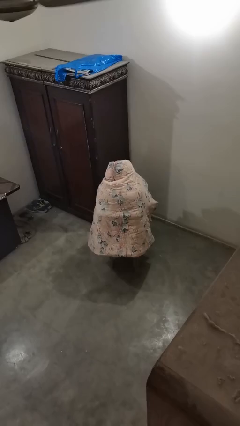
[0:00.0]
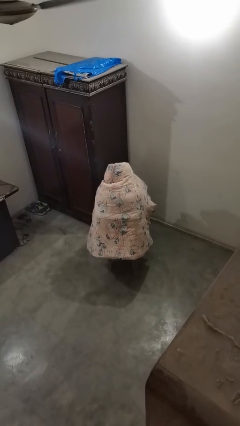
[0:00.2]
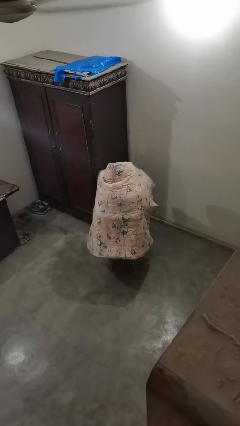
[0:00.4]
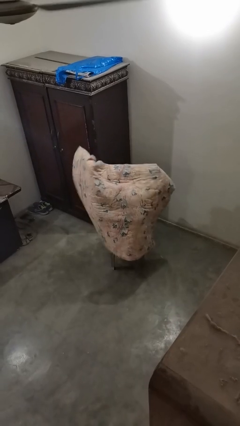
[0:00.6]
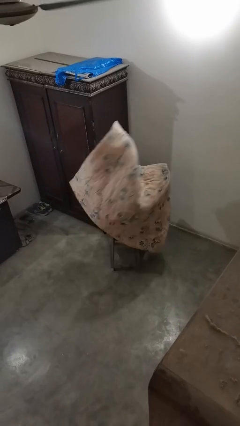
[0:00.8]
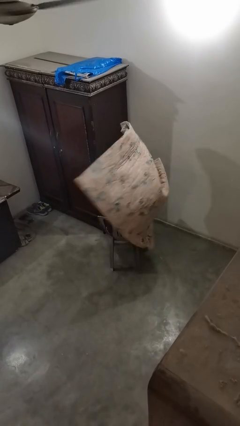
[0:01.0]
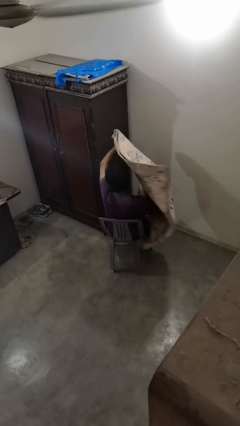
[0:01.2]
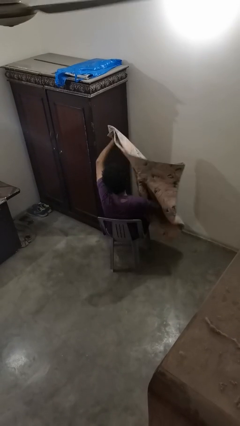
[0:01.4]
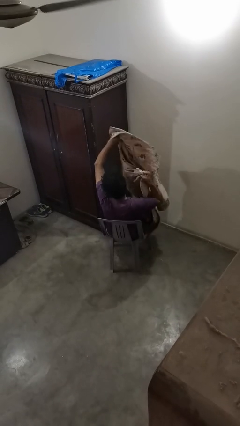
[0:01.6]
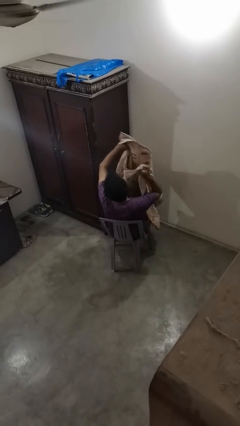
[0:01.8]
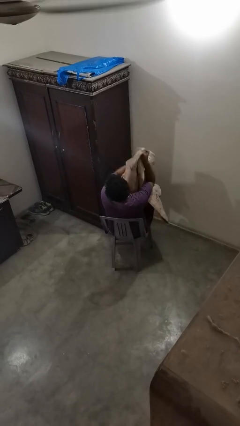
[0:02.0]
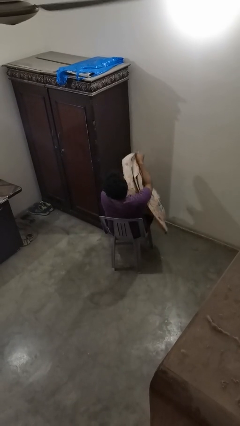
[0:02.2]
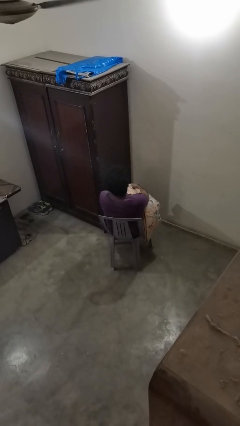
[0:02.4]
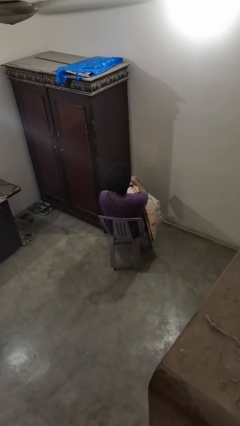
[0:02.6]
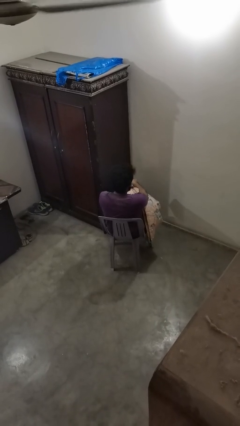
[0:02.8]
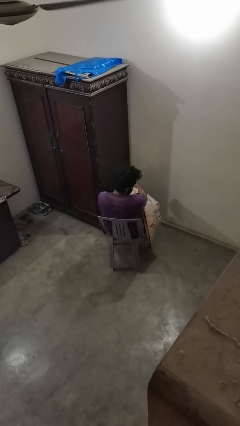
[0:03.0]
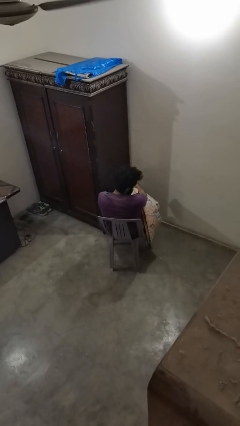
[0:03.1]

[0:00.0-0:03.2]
person uncovers with blanket

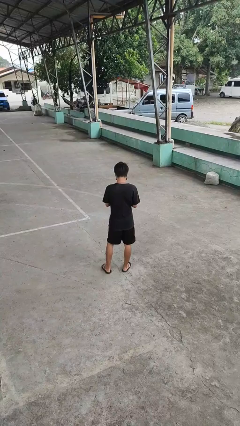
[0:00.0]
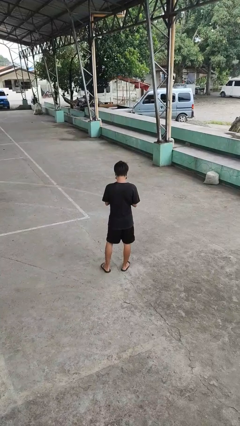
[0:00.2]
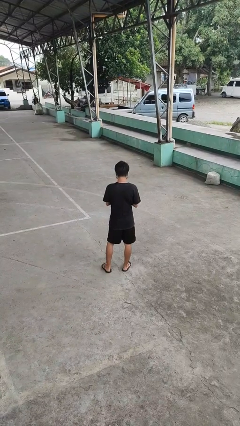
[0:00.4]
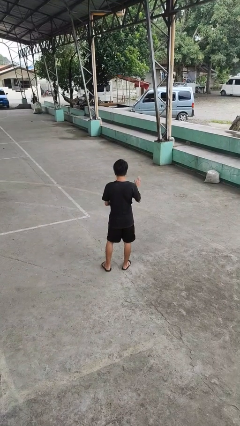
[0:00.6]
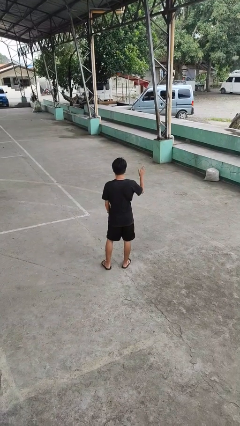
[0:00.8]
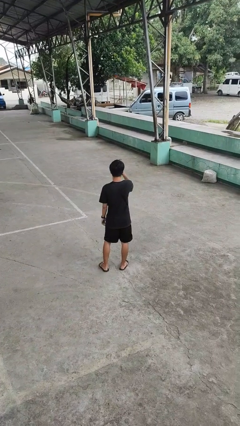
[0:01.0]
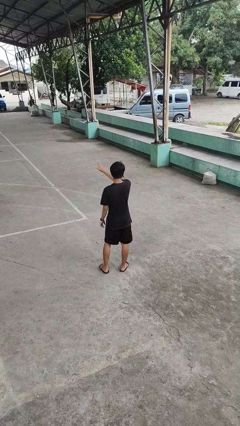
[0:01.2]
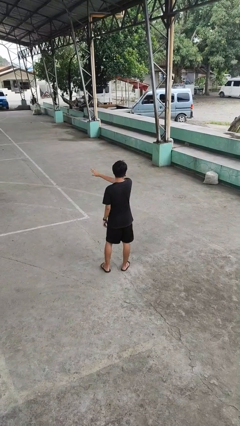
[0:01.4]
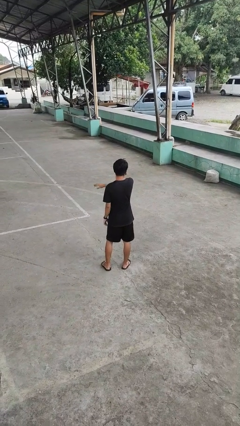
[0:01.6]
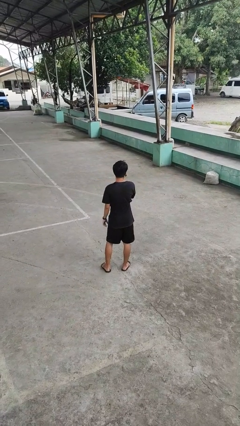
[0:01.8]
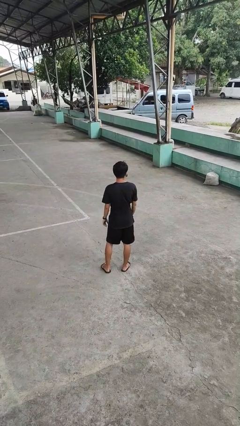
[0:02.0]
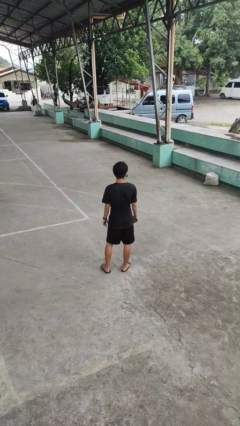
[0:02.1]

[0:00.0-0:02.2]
person gestures swipe left

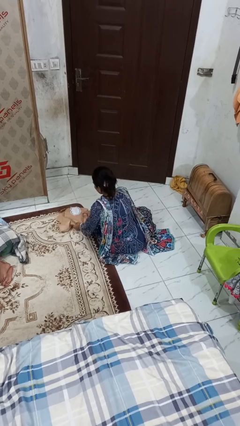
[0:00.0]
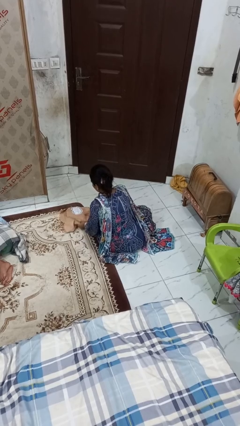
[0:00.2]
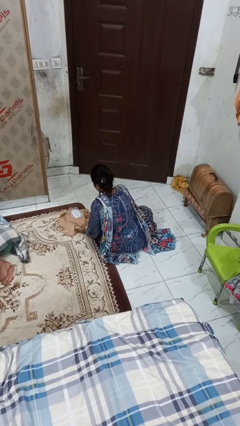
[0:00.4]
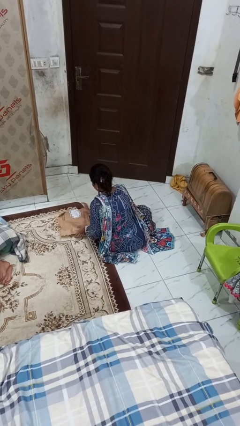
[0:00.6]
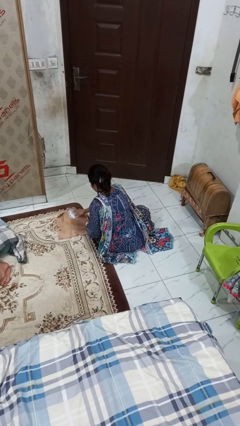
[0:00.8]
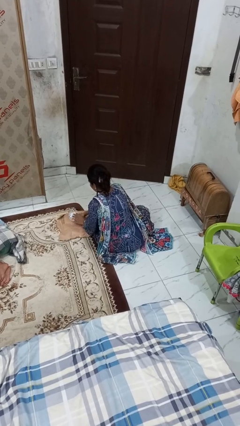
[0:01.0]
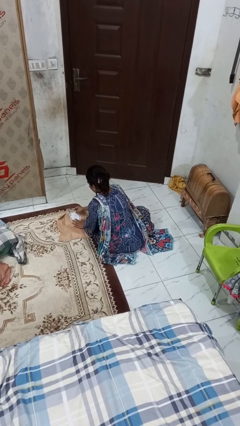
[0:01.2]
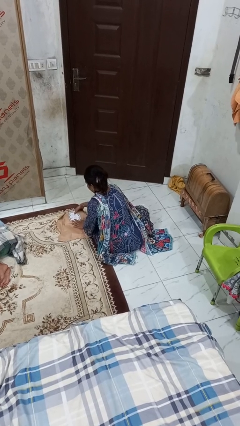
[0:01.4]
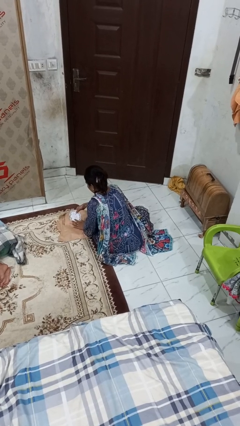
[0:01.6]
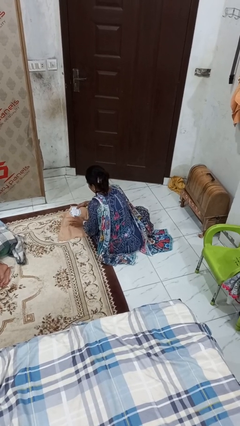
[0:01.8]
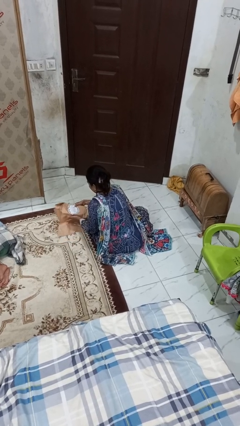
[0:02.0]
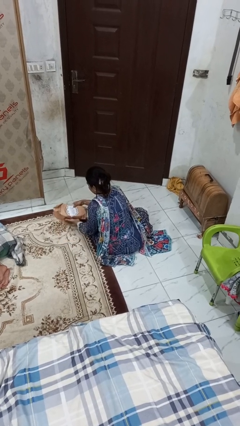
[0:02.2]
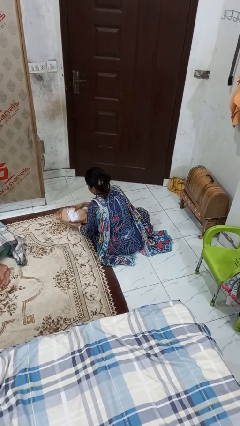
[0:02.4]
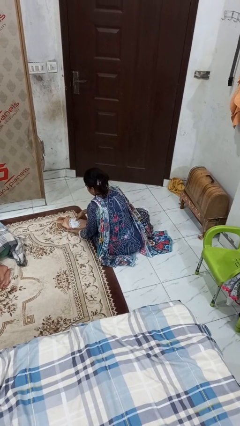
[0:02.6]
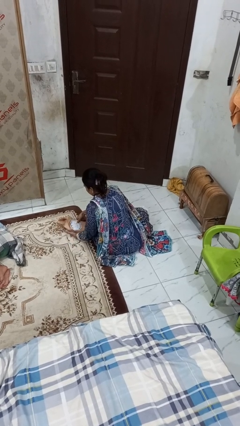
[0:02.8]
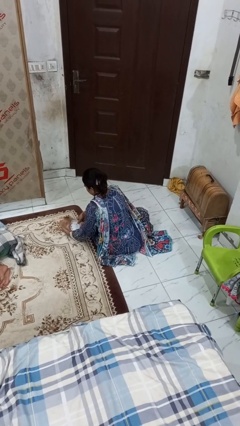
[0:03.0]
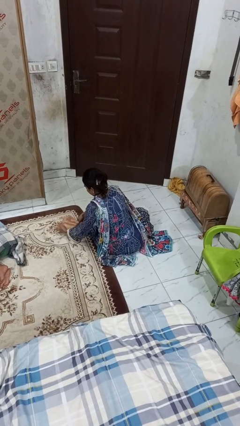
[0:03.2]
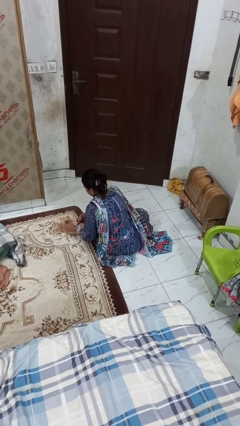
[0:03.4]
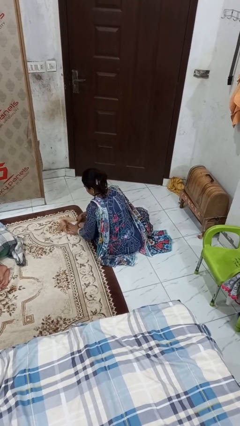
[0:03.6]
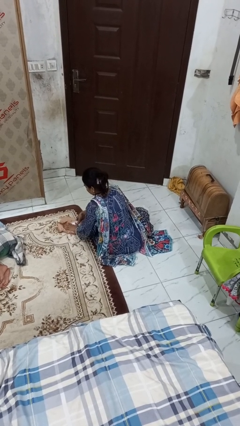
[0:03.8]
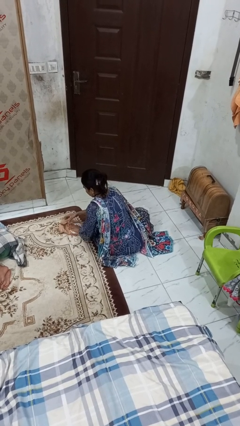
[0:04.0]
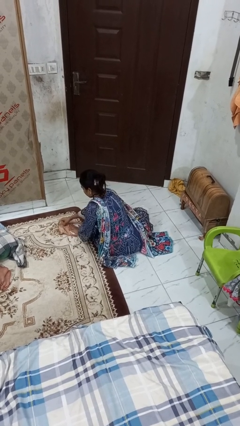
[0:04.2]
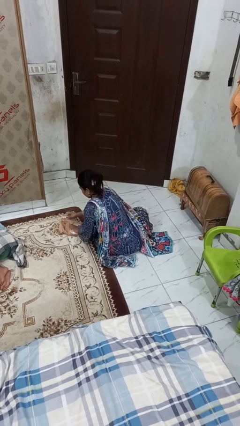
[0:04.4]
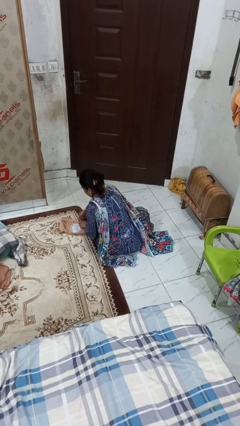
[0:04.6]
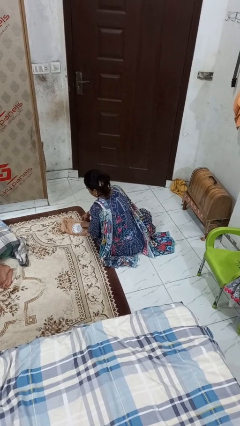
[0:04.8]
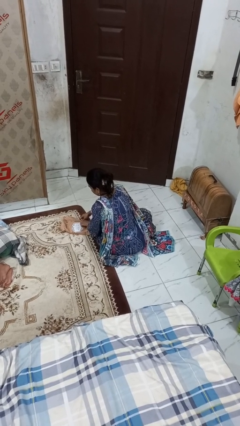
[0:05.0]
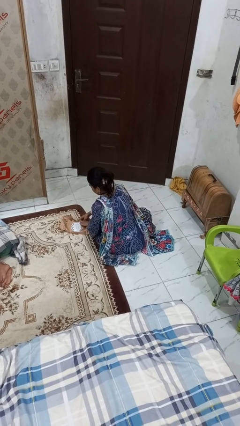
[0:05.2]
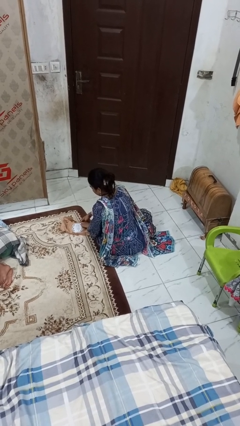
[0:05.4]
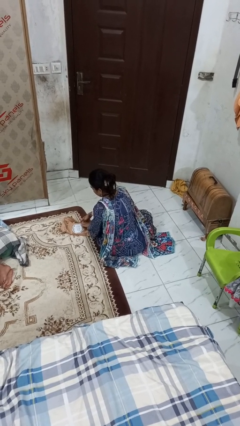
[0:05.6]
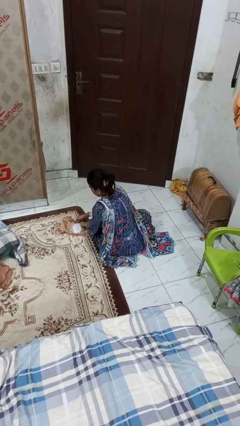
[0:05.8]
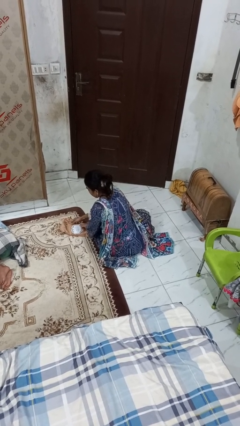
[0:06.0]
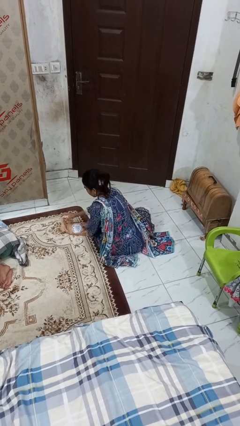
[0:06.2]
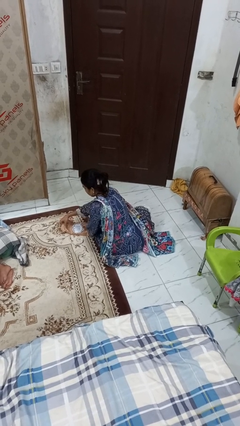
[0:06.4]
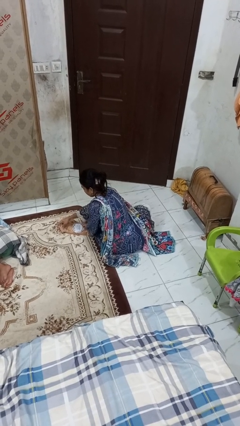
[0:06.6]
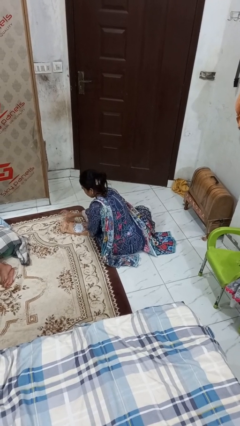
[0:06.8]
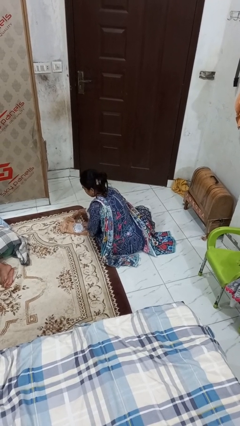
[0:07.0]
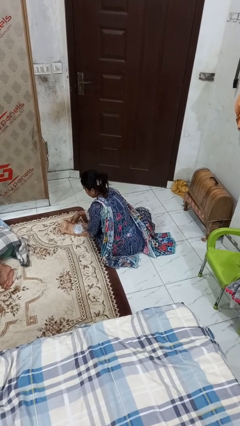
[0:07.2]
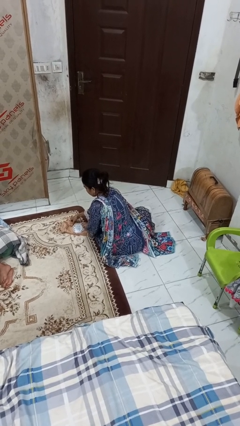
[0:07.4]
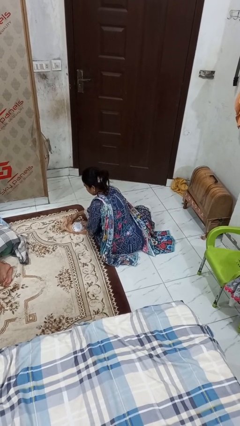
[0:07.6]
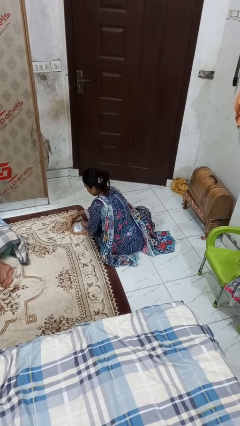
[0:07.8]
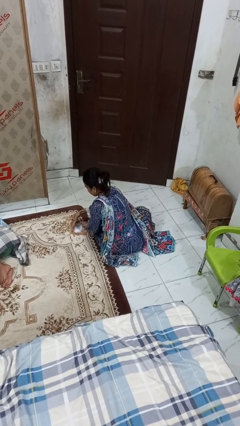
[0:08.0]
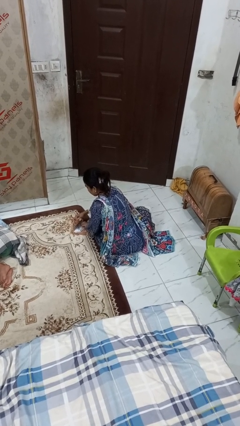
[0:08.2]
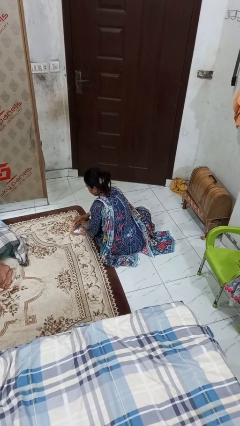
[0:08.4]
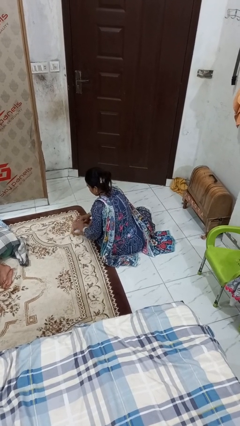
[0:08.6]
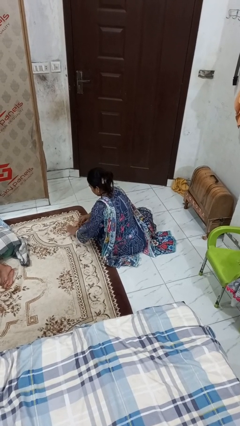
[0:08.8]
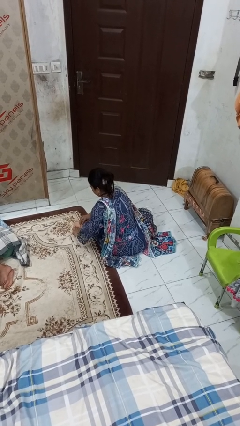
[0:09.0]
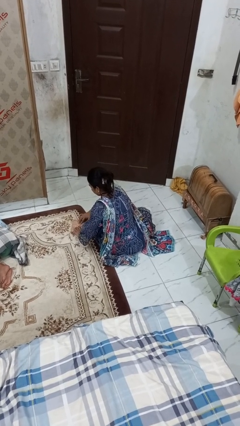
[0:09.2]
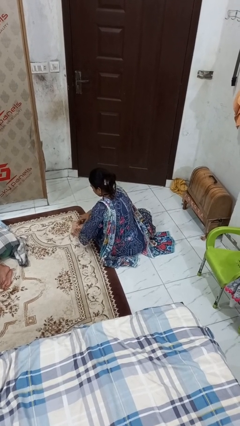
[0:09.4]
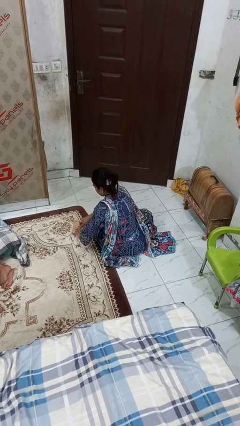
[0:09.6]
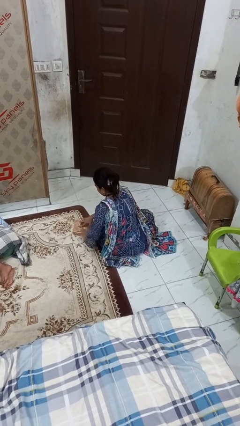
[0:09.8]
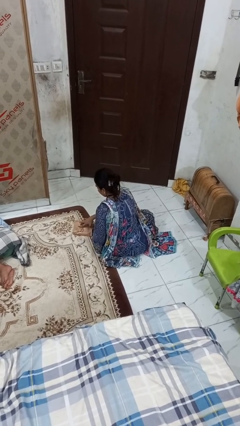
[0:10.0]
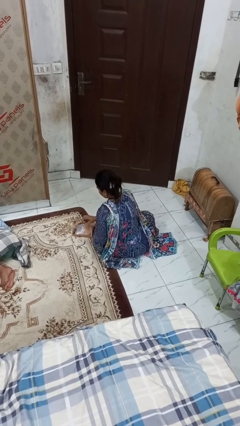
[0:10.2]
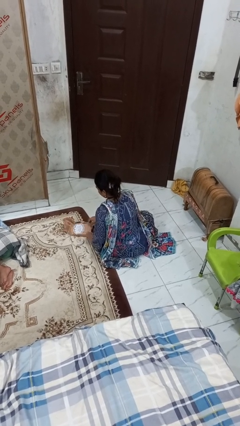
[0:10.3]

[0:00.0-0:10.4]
person wraps box

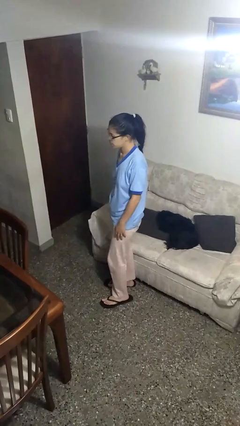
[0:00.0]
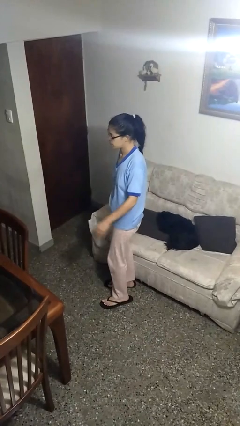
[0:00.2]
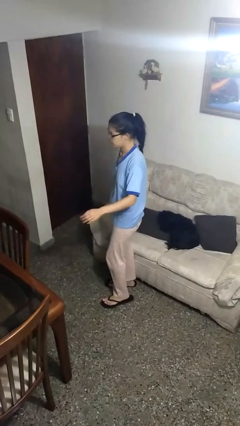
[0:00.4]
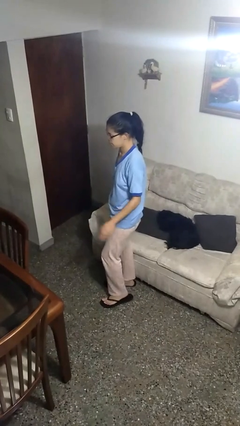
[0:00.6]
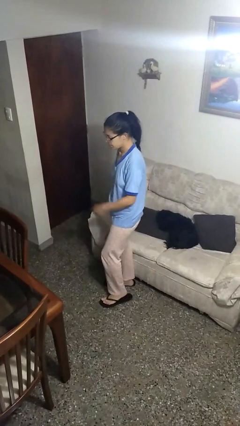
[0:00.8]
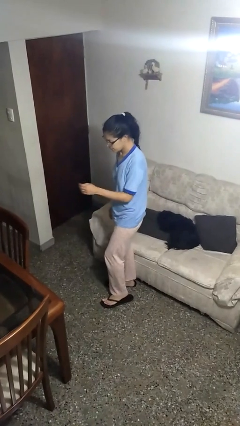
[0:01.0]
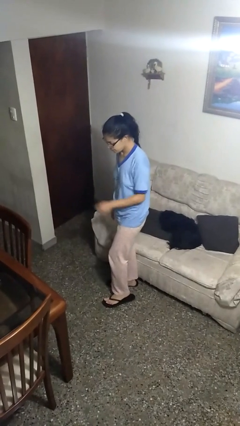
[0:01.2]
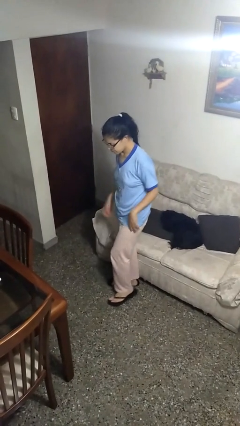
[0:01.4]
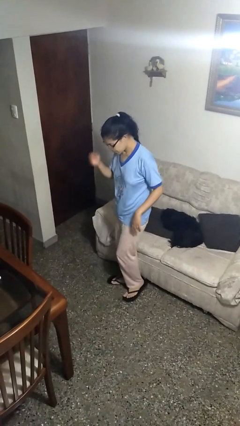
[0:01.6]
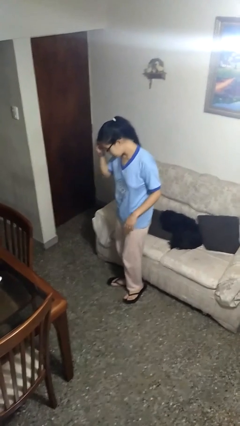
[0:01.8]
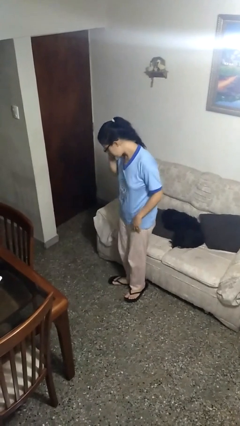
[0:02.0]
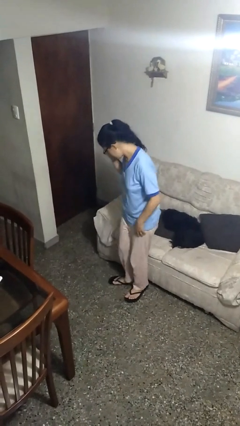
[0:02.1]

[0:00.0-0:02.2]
person slaps hands on thighs
